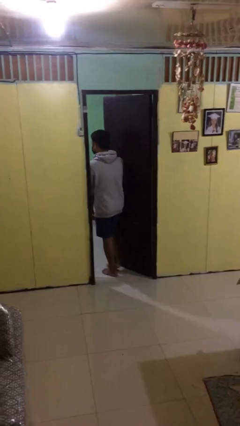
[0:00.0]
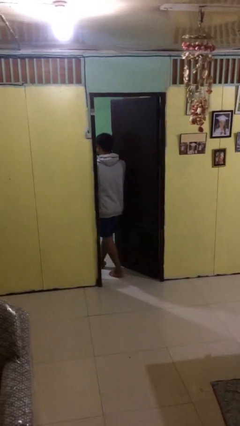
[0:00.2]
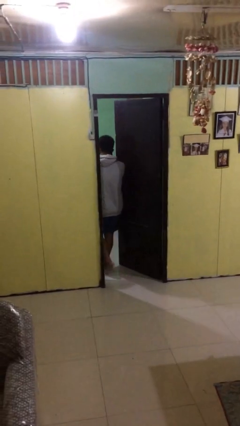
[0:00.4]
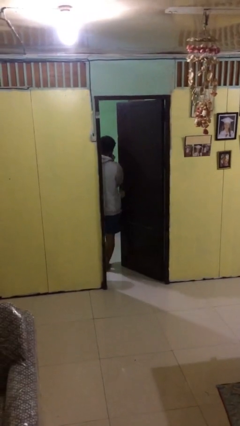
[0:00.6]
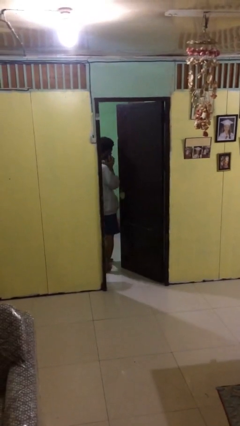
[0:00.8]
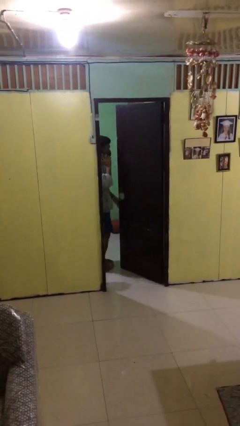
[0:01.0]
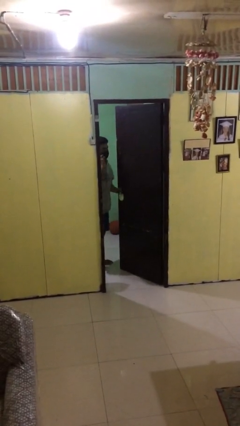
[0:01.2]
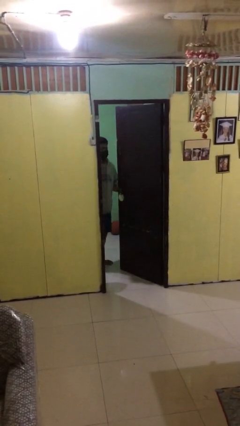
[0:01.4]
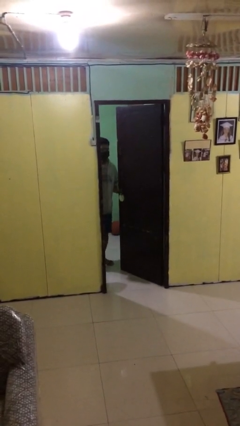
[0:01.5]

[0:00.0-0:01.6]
person exits scene through structure

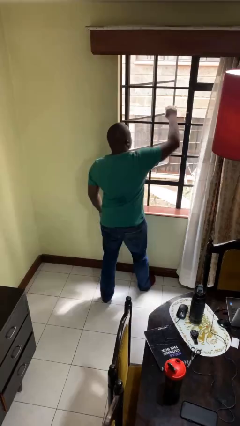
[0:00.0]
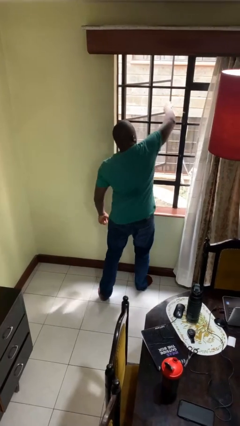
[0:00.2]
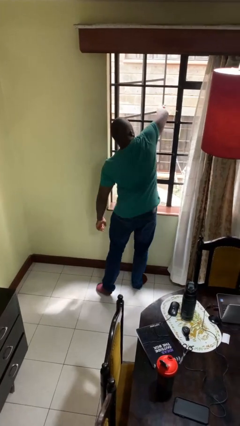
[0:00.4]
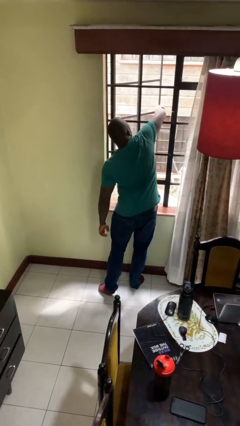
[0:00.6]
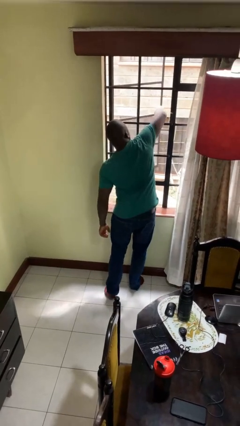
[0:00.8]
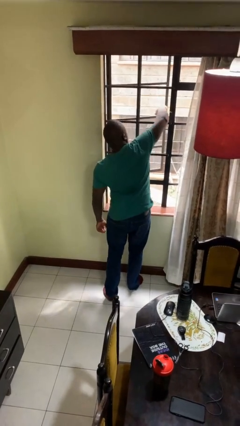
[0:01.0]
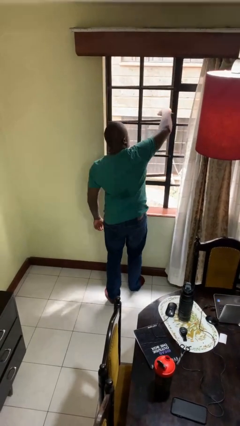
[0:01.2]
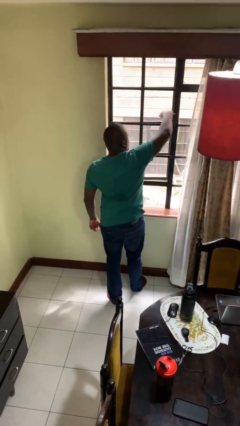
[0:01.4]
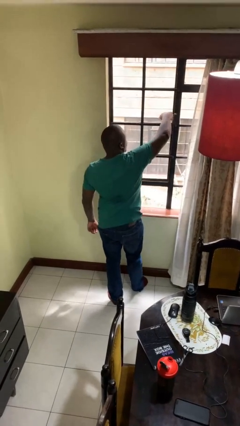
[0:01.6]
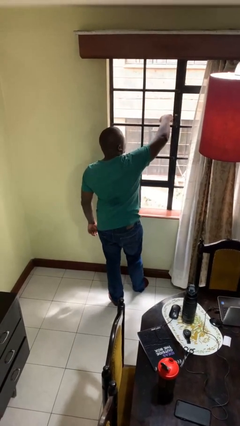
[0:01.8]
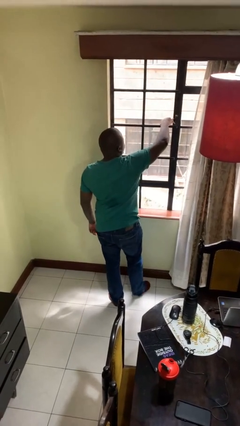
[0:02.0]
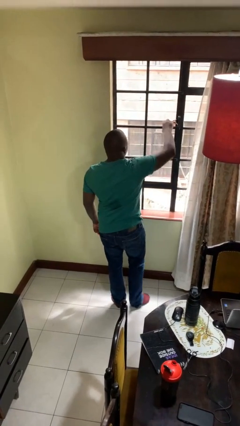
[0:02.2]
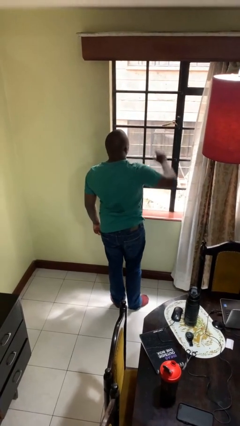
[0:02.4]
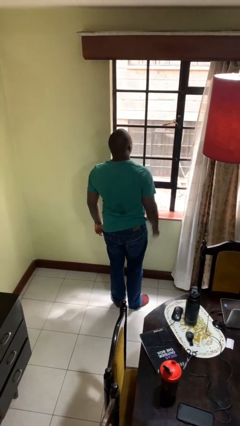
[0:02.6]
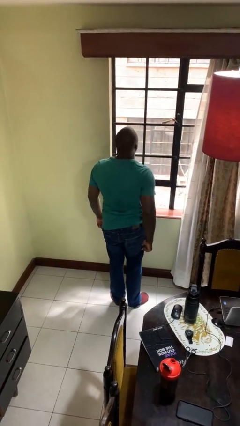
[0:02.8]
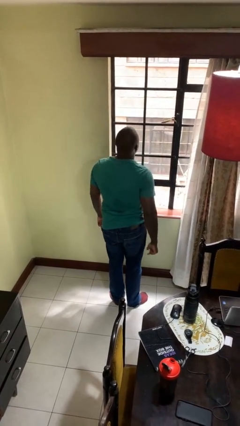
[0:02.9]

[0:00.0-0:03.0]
person closes home window

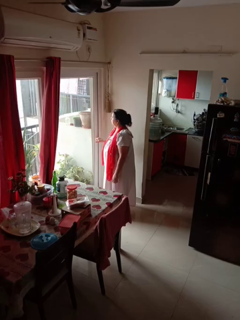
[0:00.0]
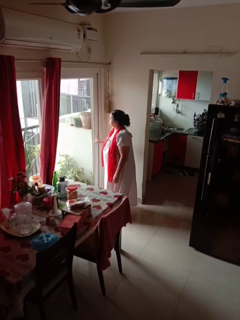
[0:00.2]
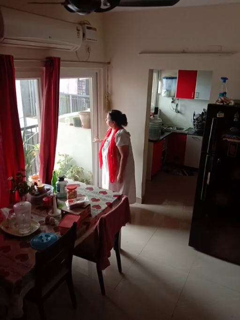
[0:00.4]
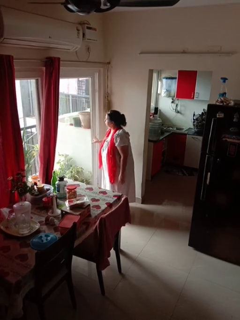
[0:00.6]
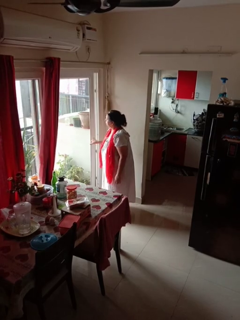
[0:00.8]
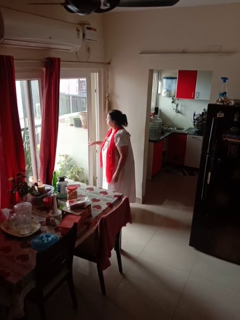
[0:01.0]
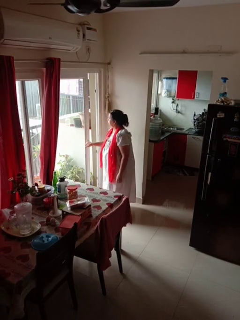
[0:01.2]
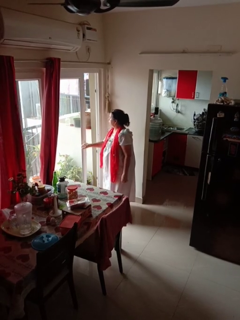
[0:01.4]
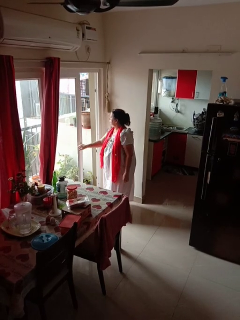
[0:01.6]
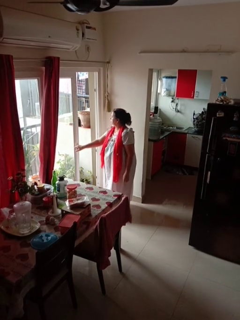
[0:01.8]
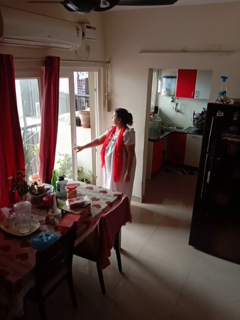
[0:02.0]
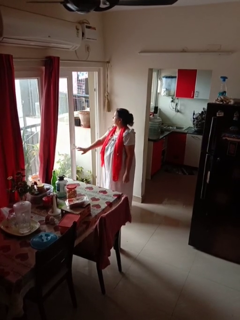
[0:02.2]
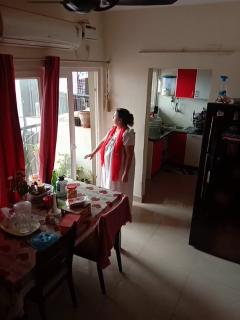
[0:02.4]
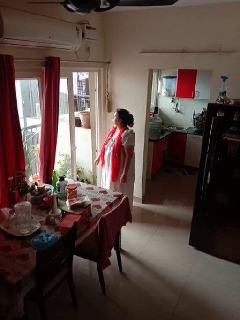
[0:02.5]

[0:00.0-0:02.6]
person opens sliding door

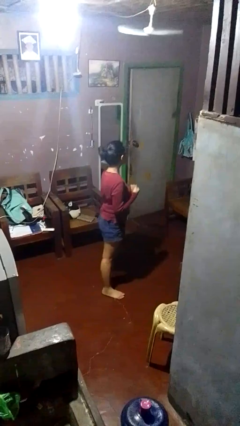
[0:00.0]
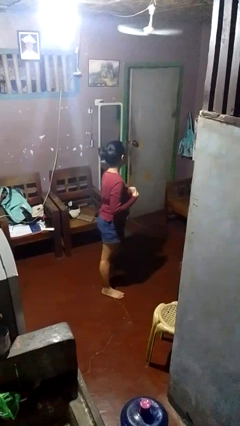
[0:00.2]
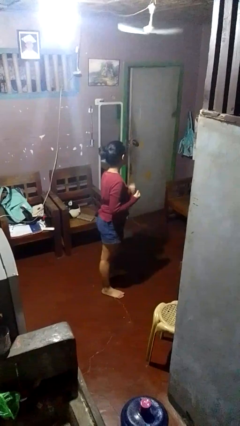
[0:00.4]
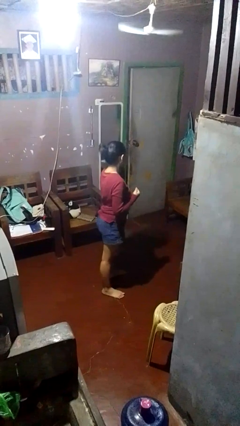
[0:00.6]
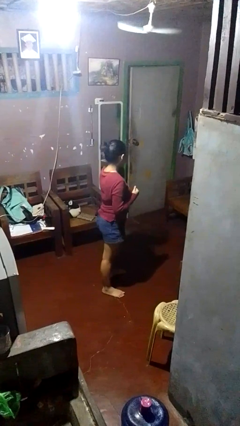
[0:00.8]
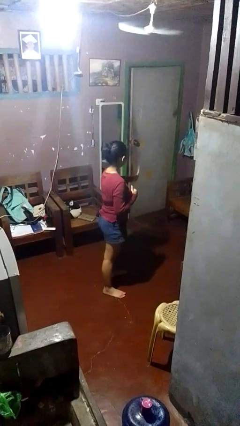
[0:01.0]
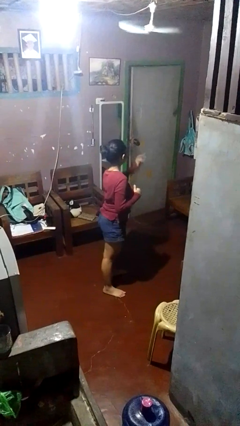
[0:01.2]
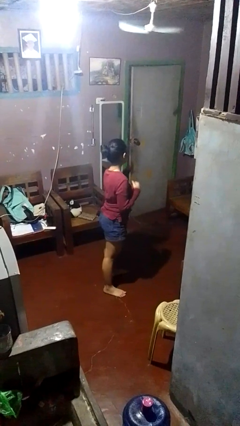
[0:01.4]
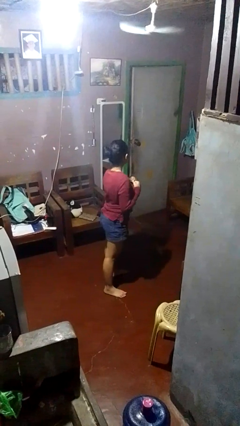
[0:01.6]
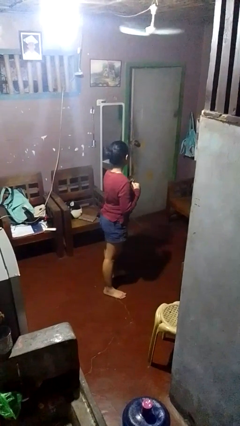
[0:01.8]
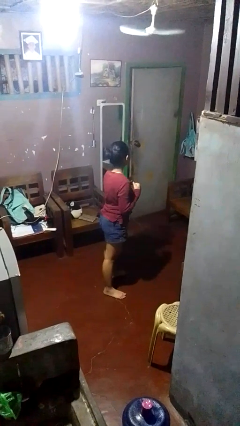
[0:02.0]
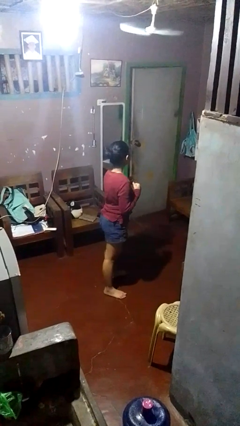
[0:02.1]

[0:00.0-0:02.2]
person karate chop

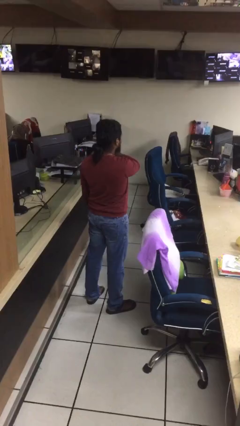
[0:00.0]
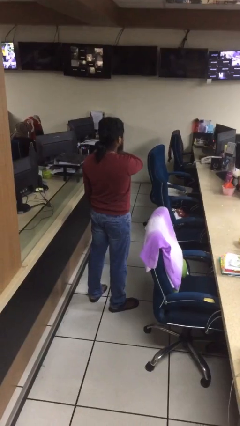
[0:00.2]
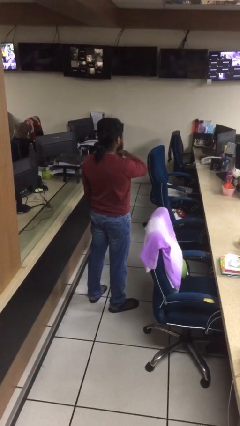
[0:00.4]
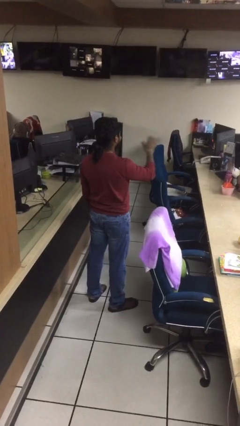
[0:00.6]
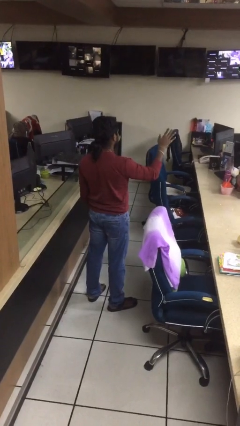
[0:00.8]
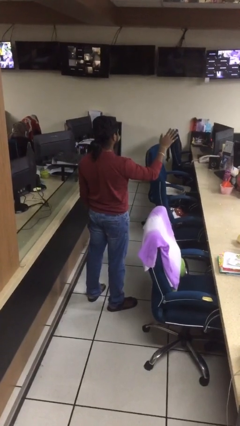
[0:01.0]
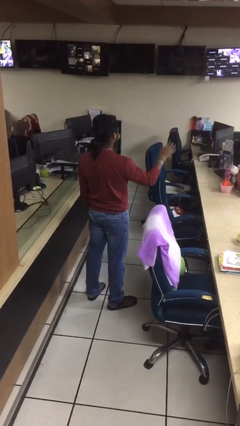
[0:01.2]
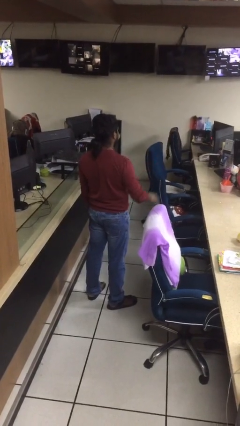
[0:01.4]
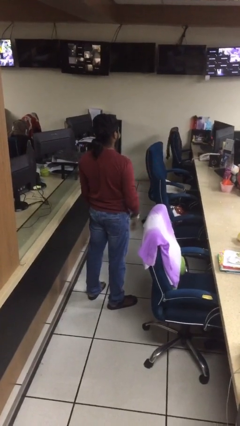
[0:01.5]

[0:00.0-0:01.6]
person gestures swipe right

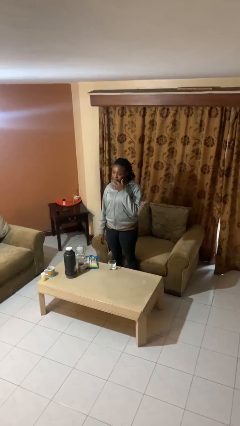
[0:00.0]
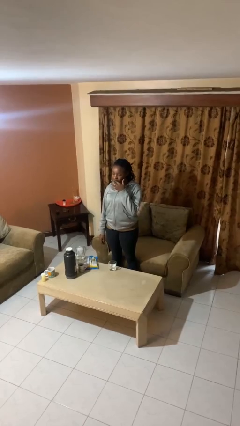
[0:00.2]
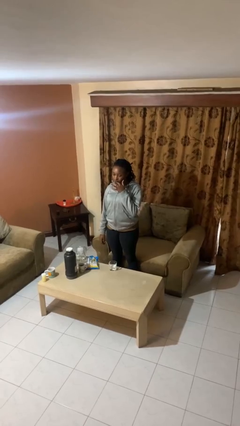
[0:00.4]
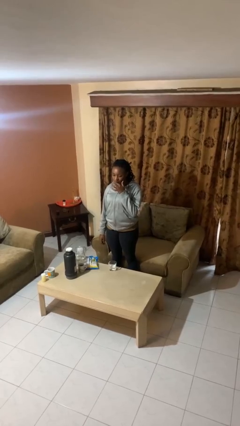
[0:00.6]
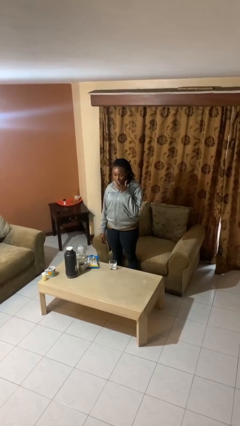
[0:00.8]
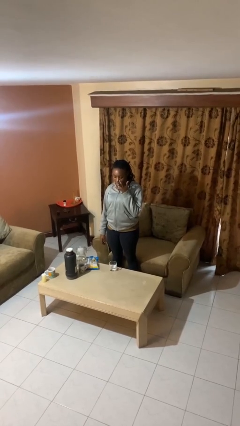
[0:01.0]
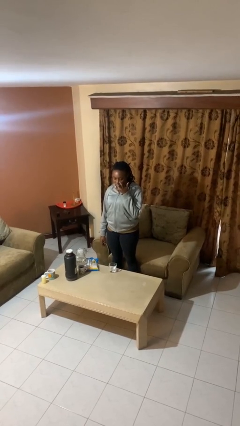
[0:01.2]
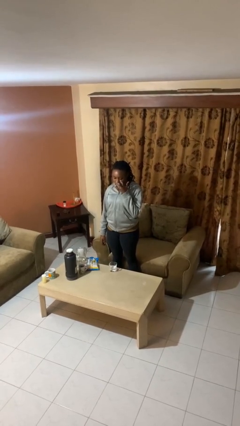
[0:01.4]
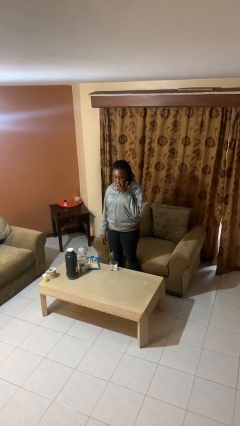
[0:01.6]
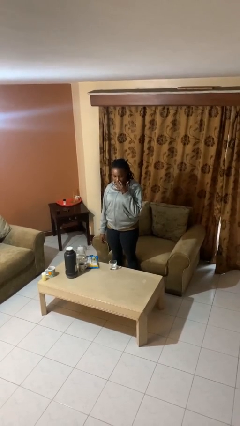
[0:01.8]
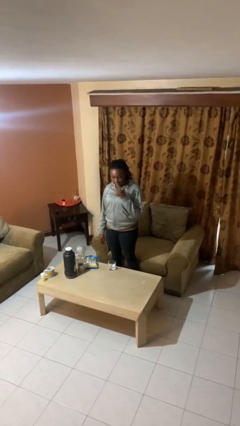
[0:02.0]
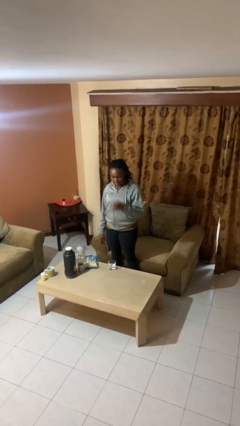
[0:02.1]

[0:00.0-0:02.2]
person licks fingers

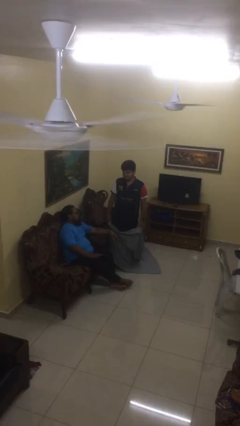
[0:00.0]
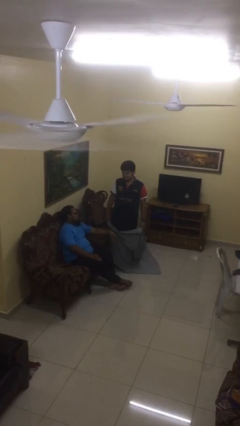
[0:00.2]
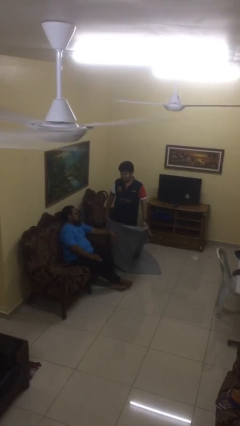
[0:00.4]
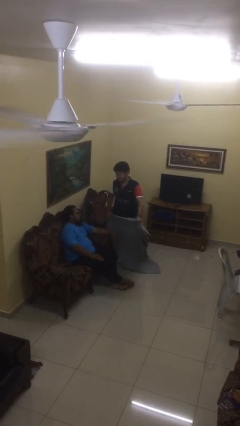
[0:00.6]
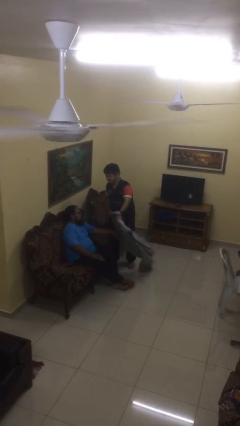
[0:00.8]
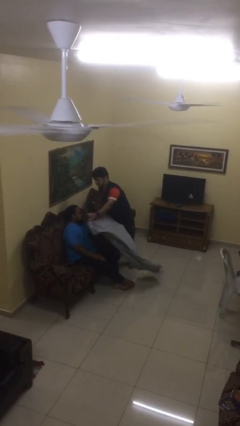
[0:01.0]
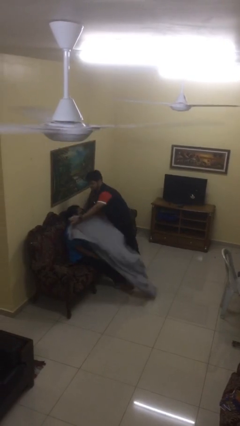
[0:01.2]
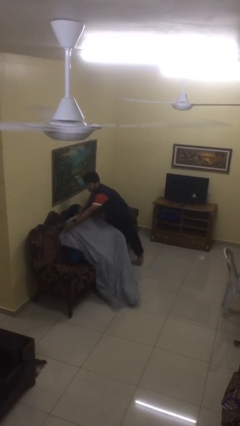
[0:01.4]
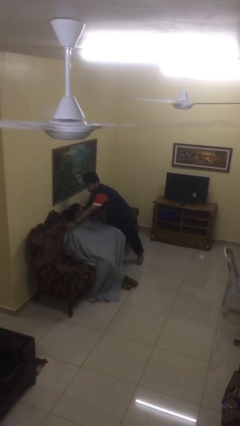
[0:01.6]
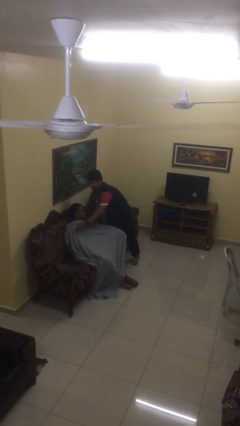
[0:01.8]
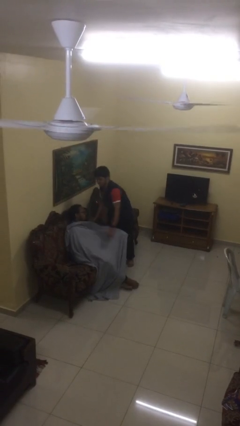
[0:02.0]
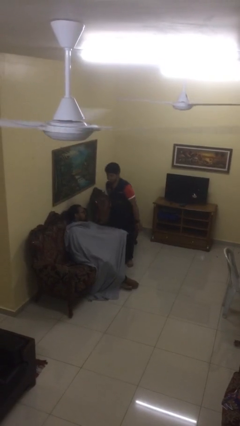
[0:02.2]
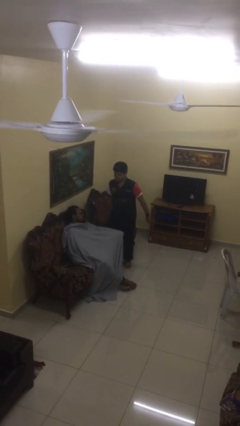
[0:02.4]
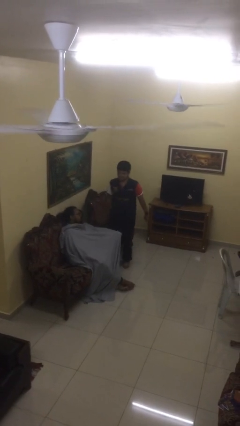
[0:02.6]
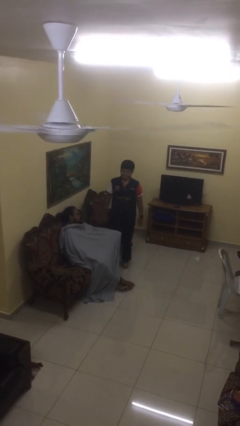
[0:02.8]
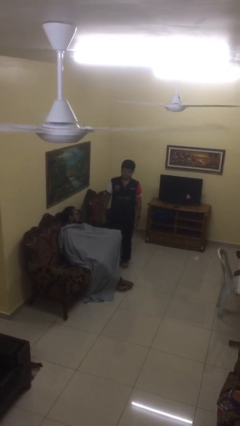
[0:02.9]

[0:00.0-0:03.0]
person covers friend with blanket

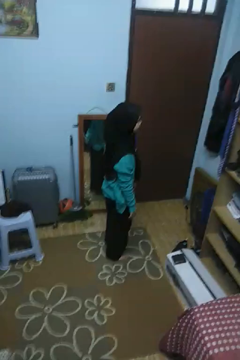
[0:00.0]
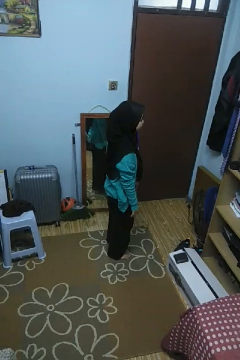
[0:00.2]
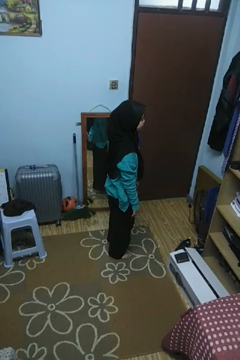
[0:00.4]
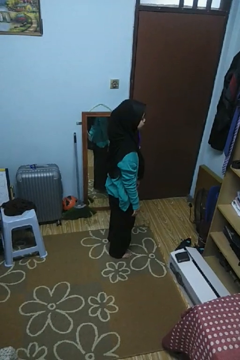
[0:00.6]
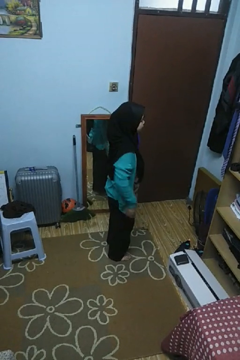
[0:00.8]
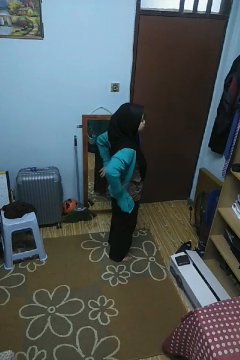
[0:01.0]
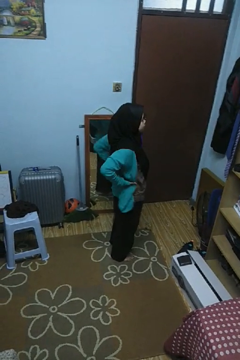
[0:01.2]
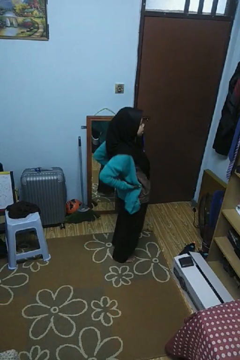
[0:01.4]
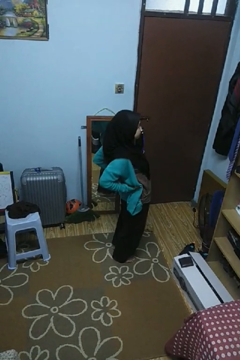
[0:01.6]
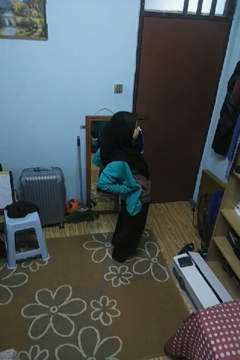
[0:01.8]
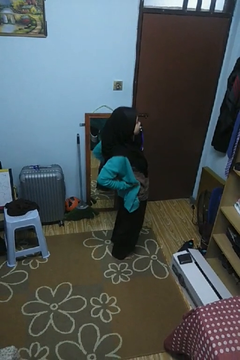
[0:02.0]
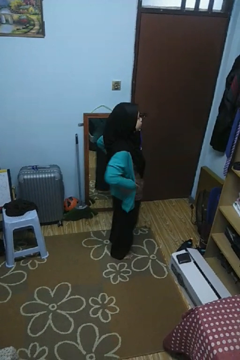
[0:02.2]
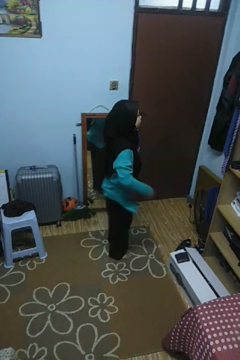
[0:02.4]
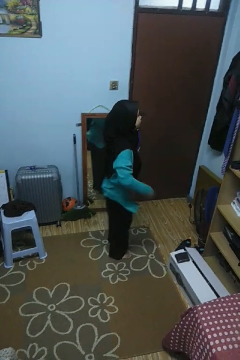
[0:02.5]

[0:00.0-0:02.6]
person stretches back
